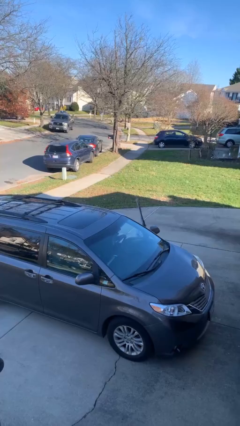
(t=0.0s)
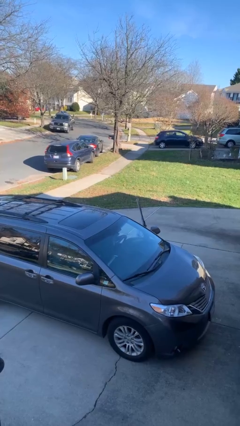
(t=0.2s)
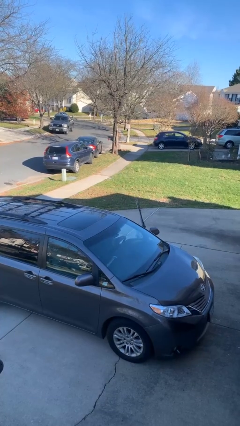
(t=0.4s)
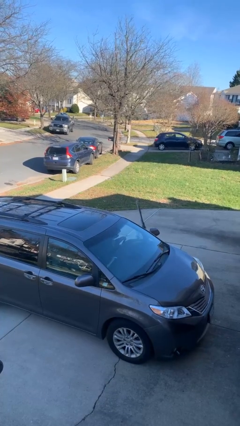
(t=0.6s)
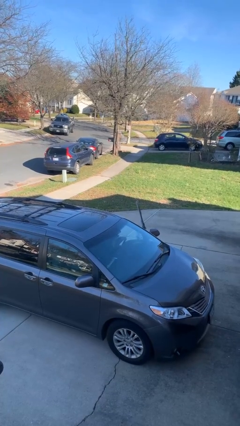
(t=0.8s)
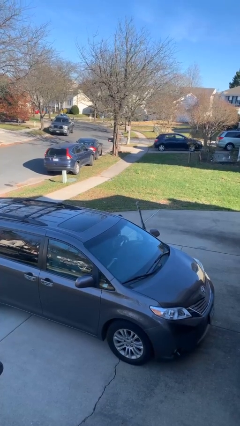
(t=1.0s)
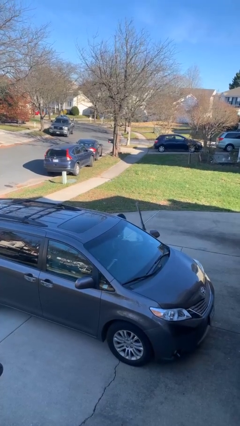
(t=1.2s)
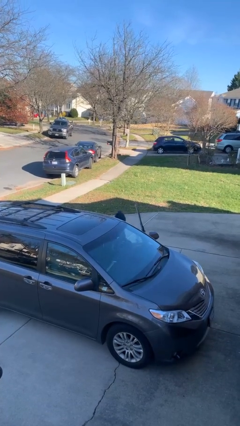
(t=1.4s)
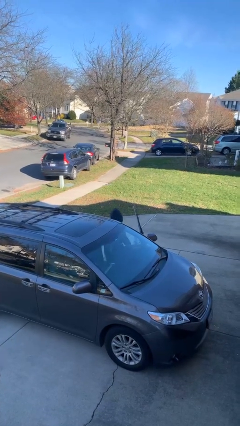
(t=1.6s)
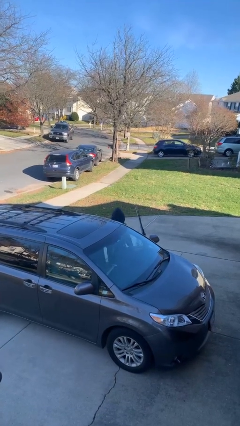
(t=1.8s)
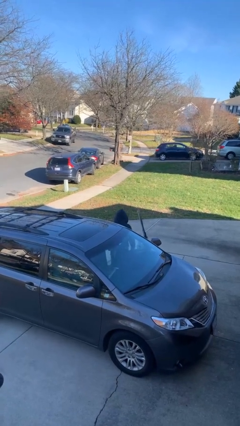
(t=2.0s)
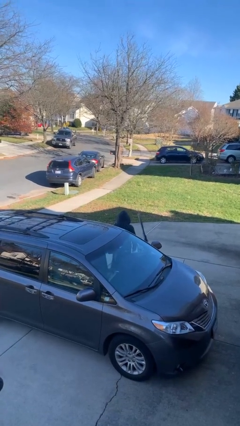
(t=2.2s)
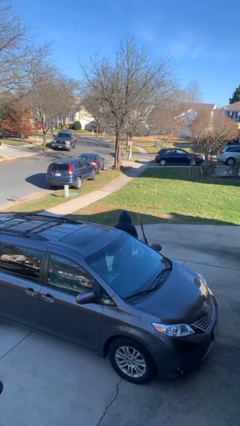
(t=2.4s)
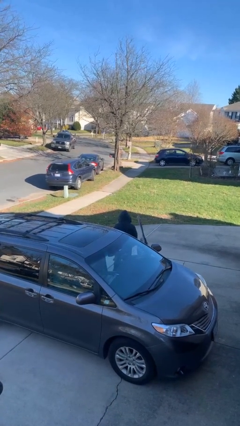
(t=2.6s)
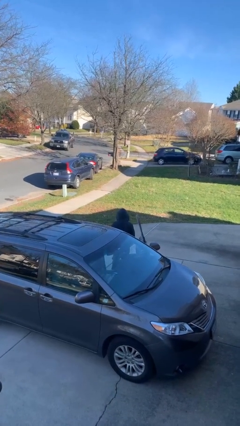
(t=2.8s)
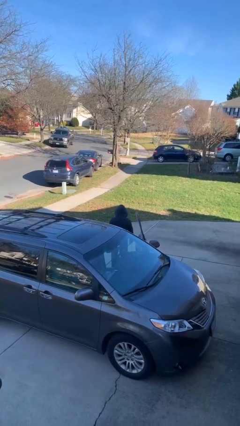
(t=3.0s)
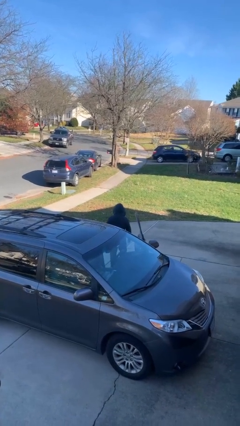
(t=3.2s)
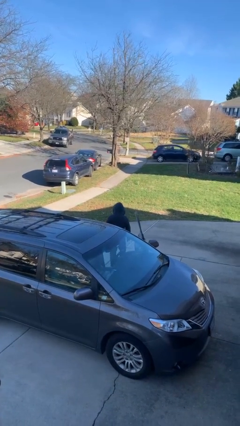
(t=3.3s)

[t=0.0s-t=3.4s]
person exits car

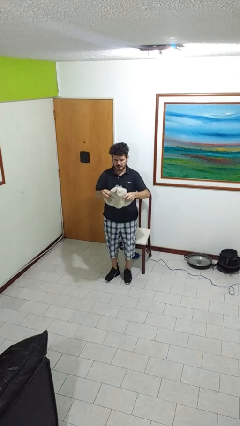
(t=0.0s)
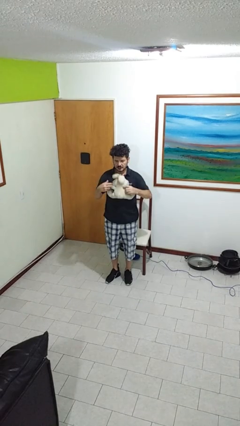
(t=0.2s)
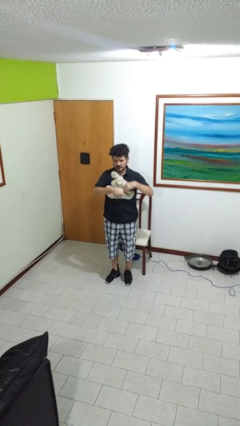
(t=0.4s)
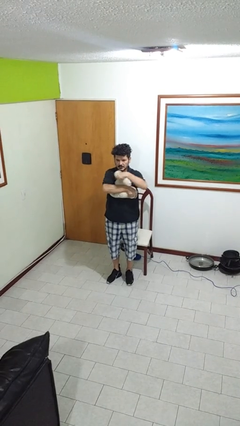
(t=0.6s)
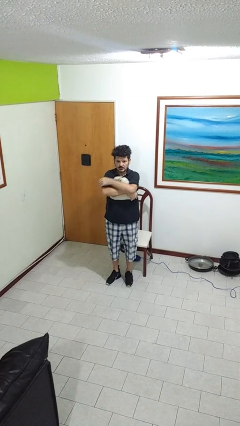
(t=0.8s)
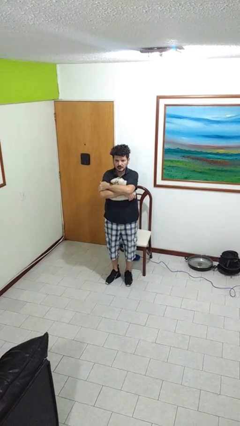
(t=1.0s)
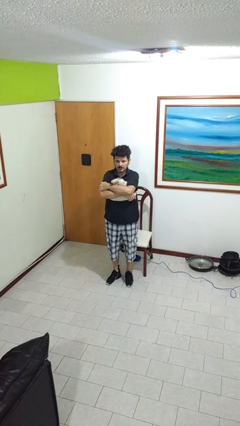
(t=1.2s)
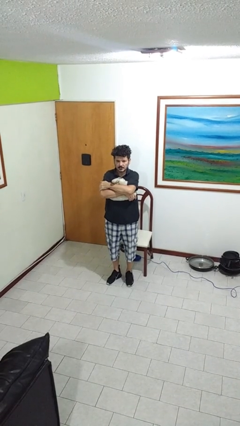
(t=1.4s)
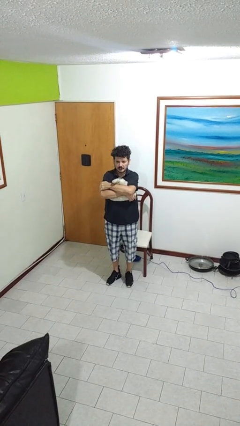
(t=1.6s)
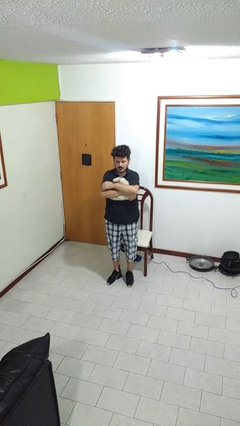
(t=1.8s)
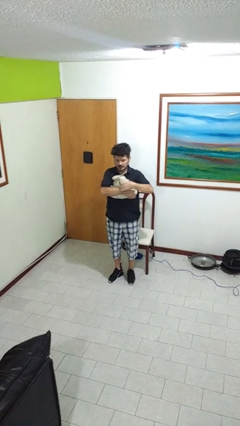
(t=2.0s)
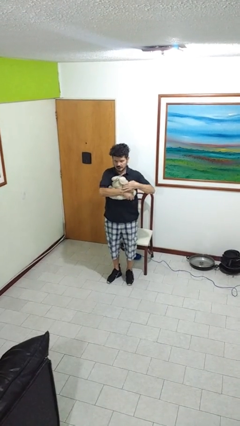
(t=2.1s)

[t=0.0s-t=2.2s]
person hugs stuffed animal

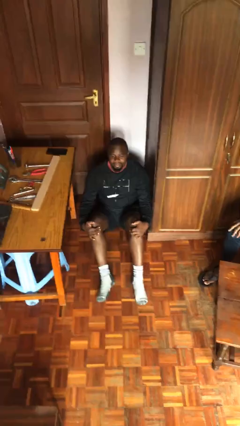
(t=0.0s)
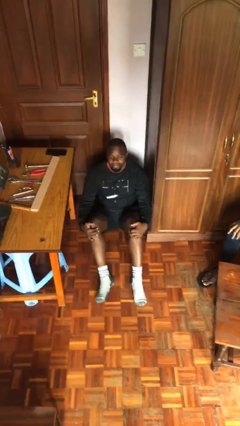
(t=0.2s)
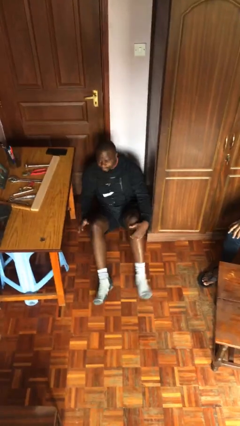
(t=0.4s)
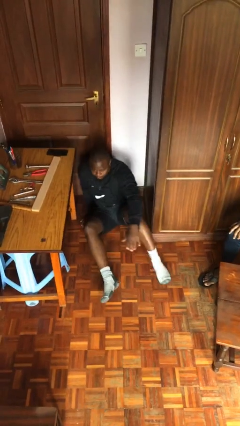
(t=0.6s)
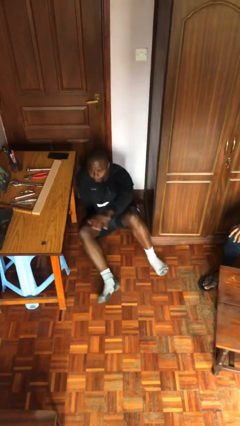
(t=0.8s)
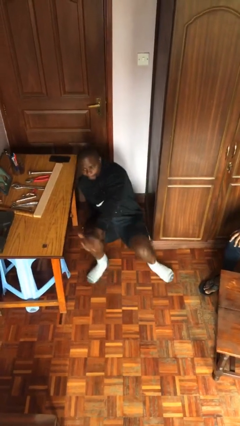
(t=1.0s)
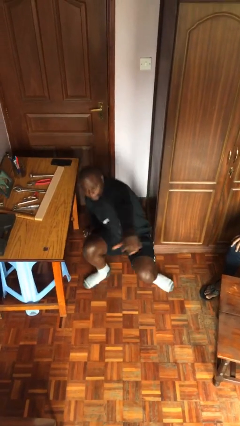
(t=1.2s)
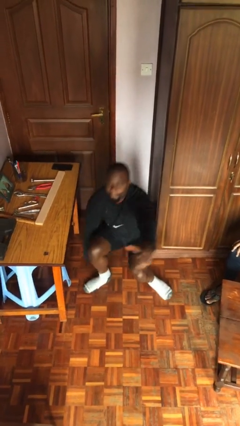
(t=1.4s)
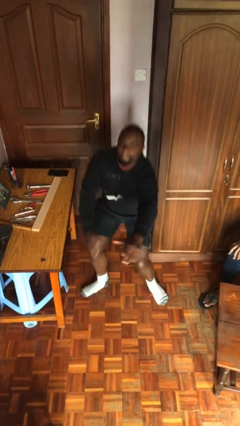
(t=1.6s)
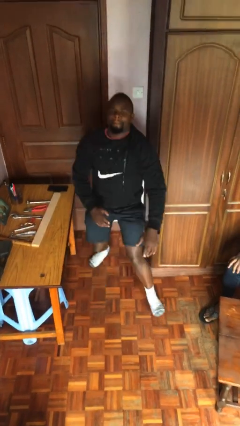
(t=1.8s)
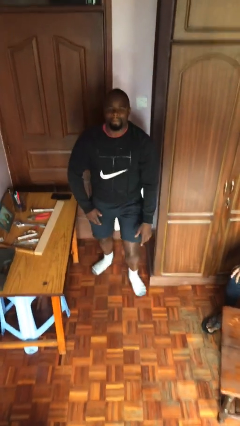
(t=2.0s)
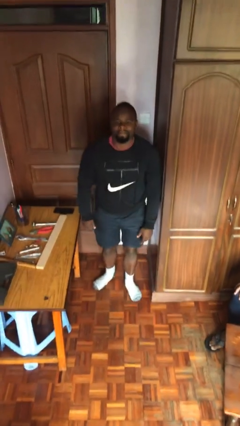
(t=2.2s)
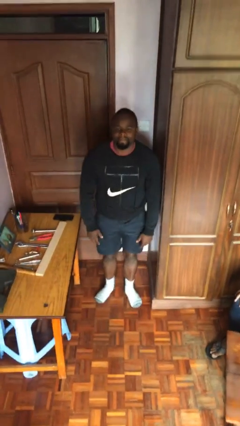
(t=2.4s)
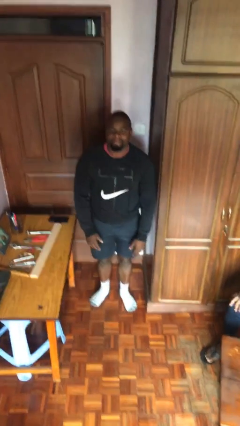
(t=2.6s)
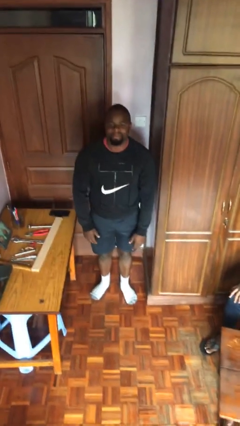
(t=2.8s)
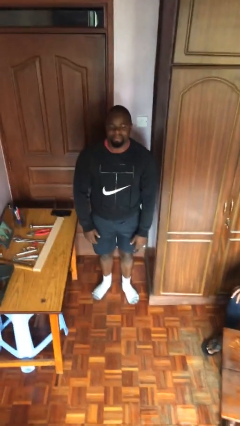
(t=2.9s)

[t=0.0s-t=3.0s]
person stands up

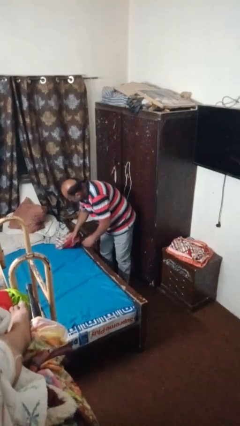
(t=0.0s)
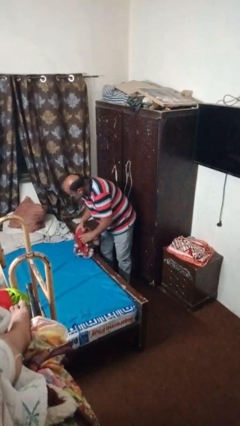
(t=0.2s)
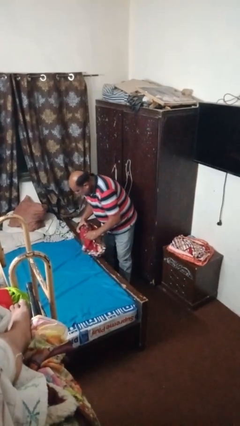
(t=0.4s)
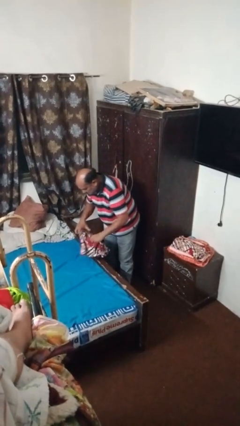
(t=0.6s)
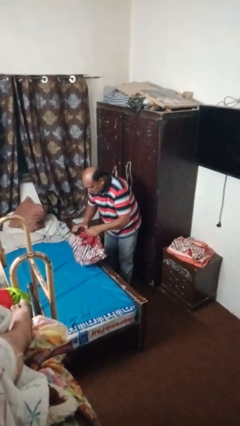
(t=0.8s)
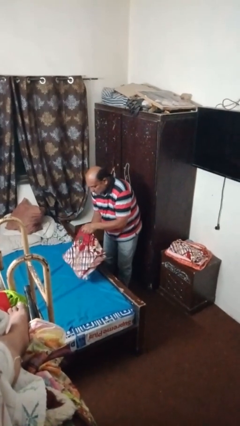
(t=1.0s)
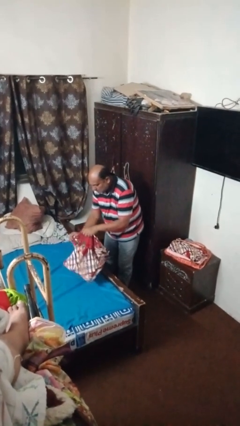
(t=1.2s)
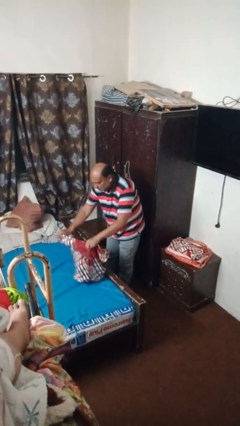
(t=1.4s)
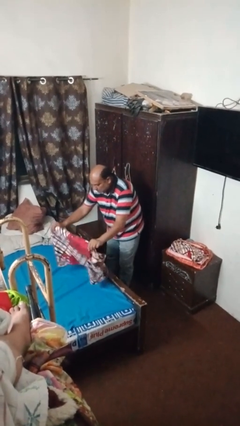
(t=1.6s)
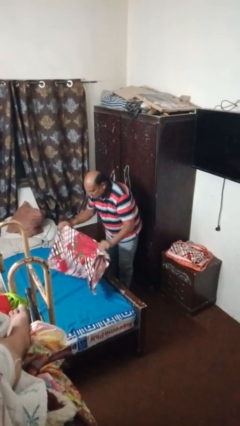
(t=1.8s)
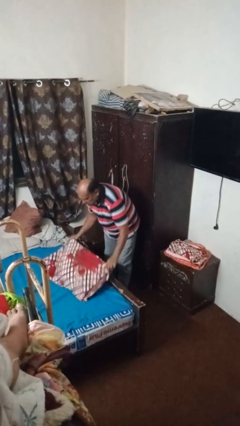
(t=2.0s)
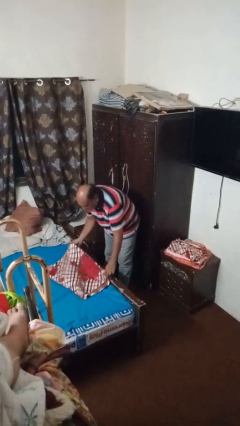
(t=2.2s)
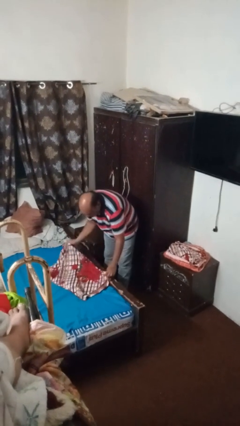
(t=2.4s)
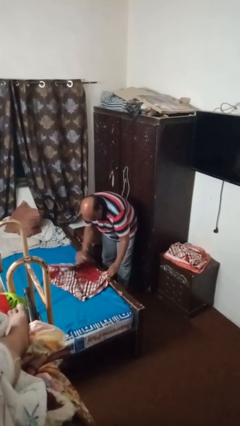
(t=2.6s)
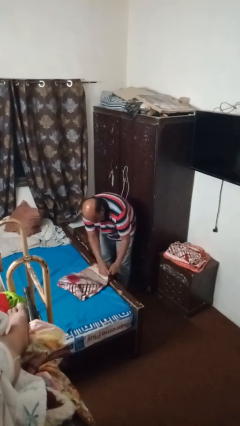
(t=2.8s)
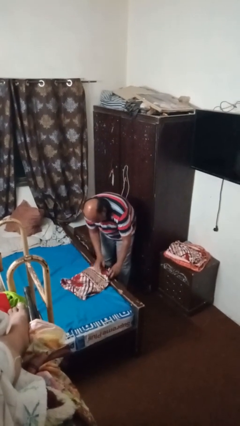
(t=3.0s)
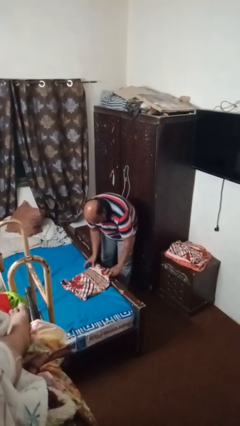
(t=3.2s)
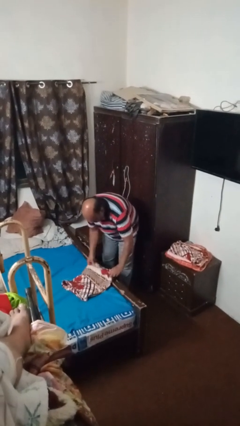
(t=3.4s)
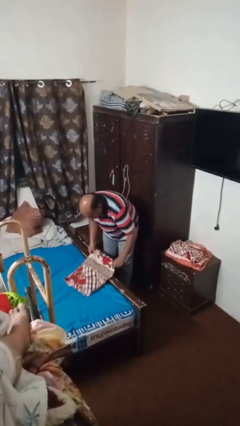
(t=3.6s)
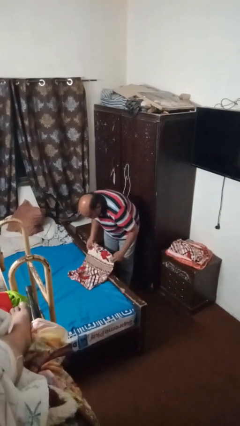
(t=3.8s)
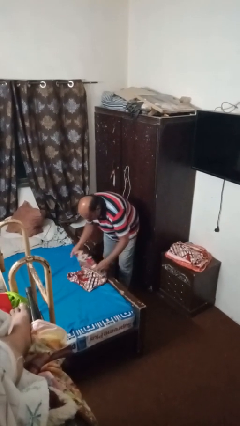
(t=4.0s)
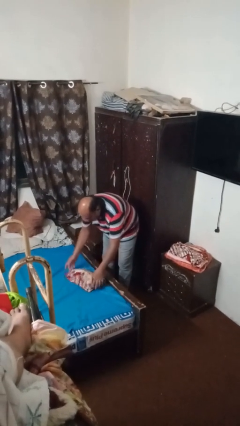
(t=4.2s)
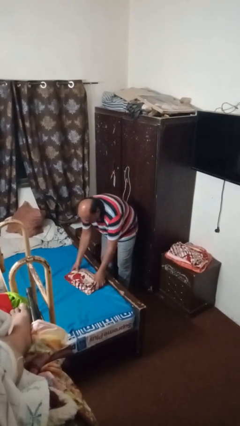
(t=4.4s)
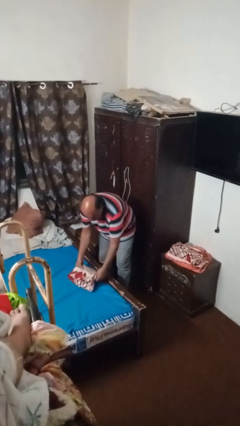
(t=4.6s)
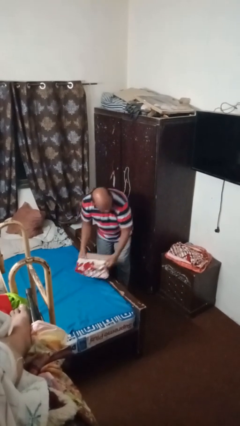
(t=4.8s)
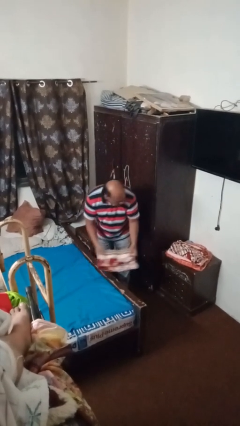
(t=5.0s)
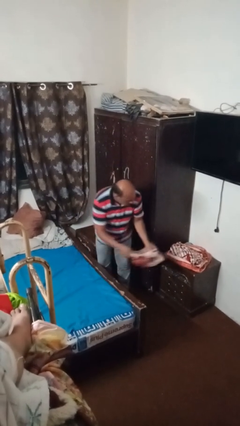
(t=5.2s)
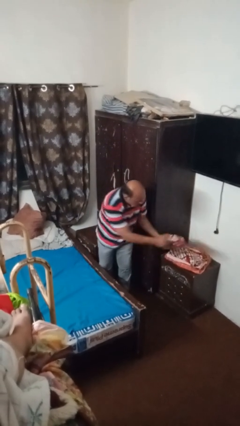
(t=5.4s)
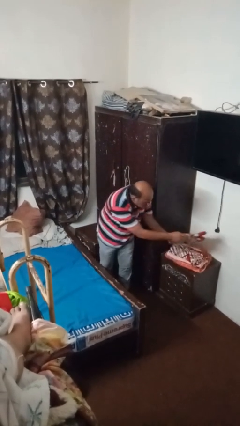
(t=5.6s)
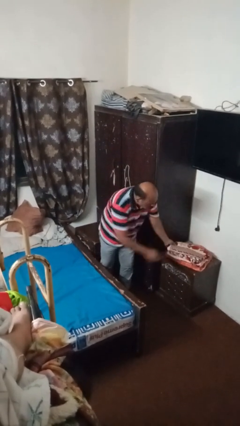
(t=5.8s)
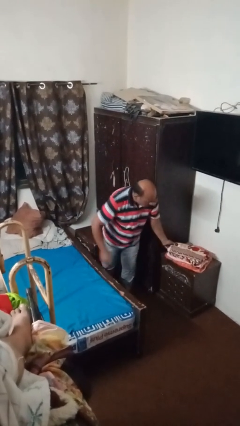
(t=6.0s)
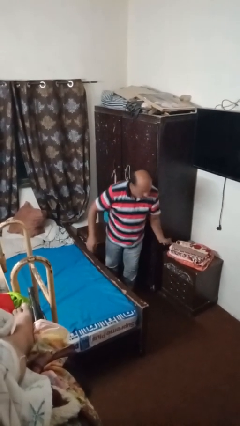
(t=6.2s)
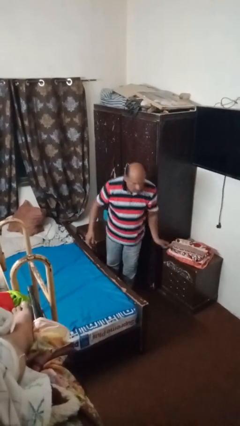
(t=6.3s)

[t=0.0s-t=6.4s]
person folds towel

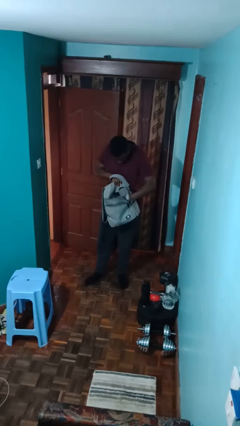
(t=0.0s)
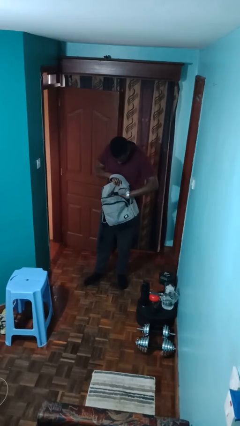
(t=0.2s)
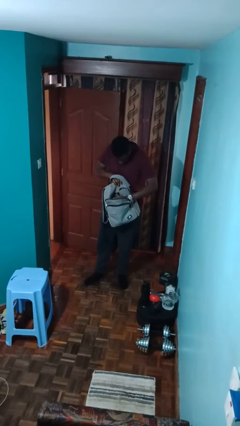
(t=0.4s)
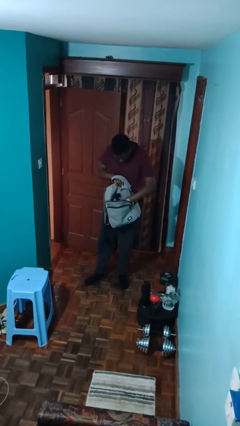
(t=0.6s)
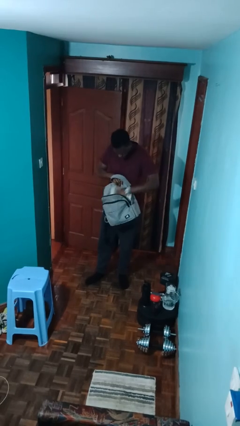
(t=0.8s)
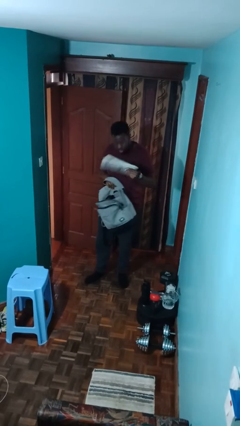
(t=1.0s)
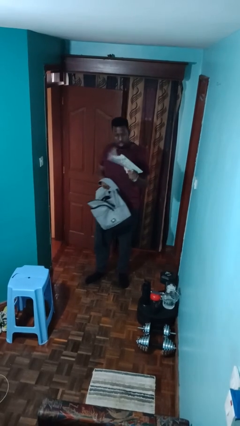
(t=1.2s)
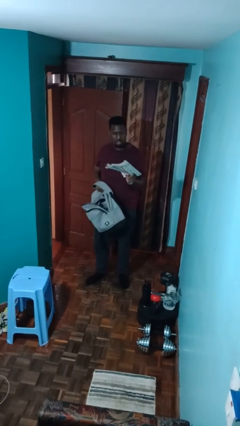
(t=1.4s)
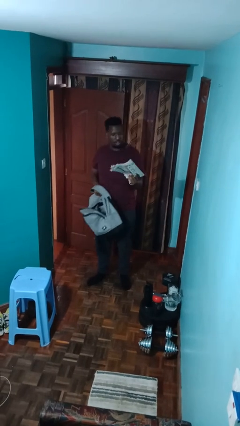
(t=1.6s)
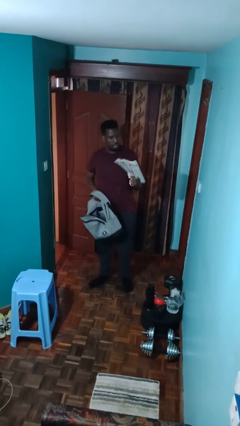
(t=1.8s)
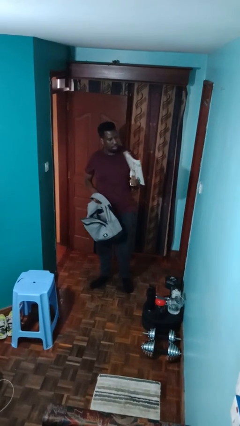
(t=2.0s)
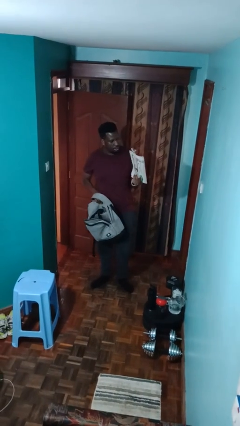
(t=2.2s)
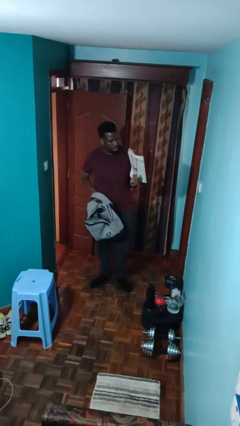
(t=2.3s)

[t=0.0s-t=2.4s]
person takes object from backpack
